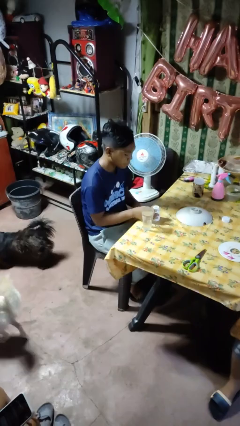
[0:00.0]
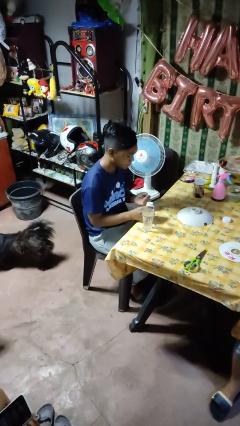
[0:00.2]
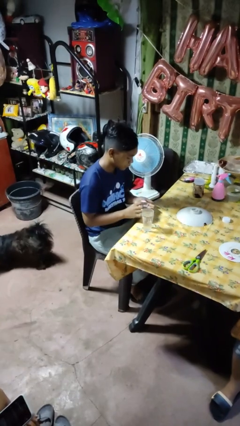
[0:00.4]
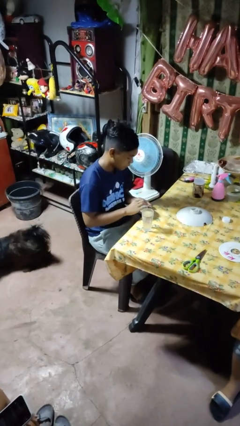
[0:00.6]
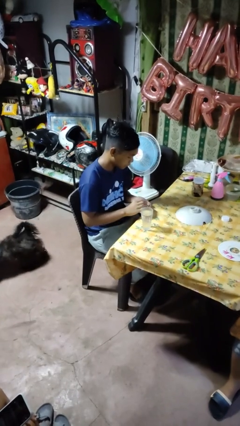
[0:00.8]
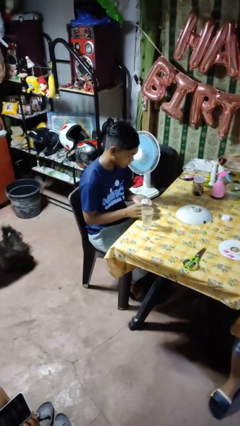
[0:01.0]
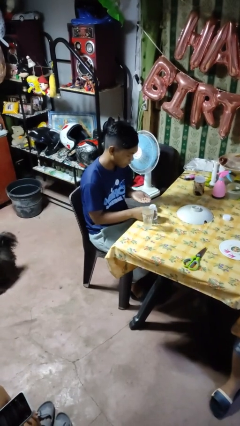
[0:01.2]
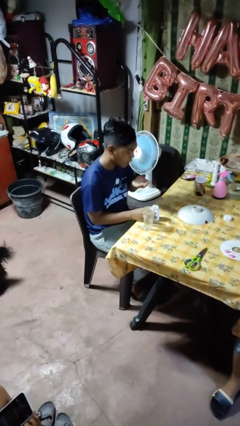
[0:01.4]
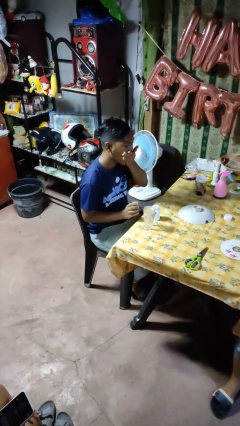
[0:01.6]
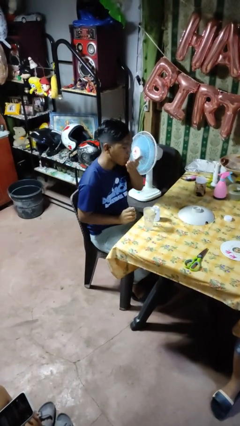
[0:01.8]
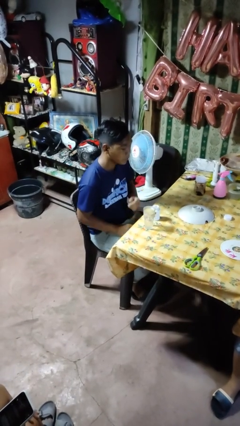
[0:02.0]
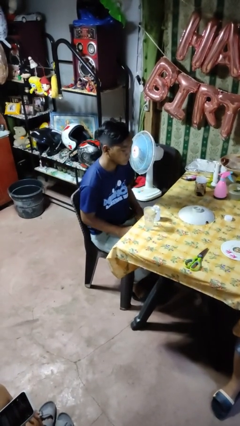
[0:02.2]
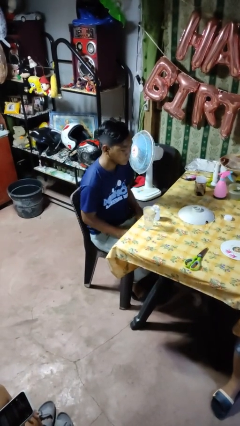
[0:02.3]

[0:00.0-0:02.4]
person takes medicine pills

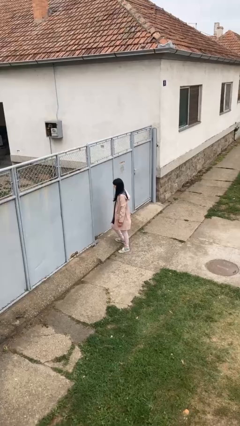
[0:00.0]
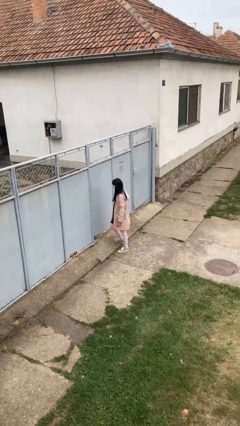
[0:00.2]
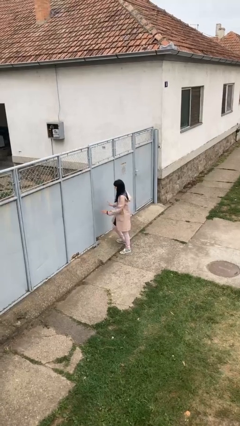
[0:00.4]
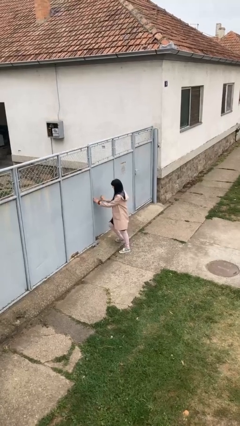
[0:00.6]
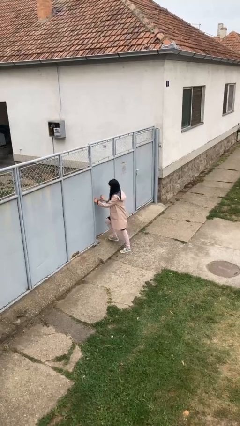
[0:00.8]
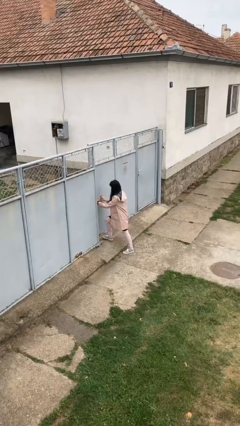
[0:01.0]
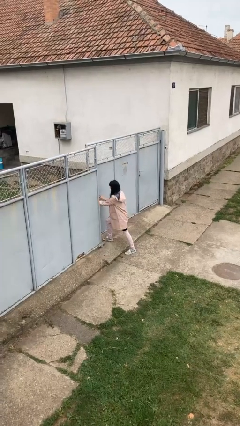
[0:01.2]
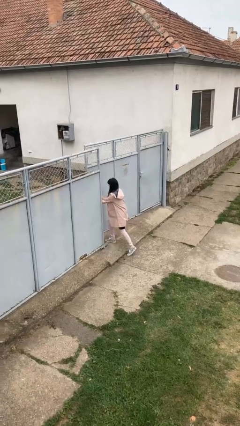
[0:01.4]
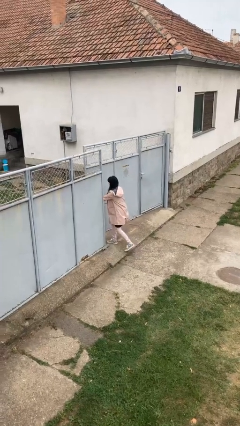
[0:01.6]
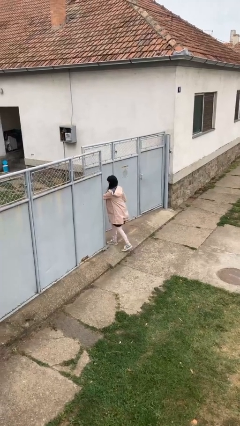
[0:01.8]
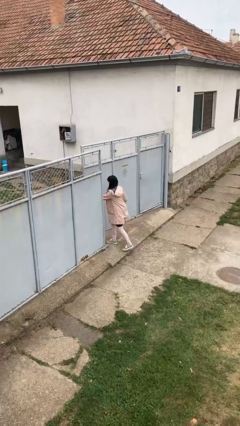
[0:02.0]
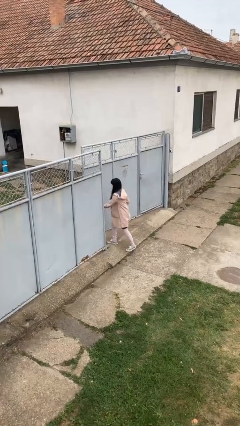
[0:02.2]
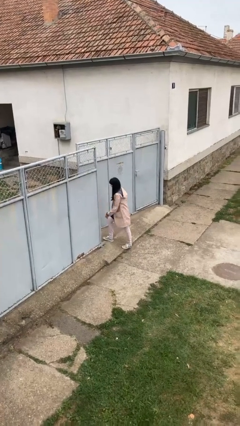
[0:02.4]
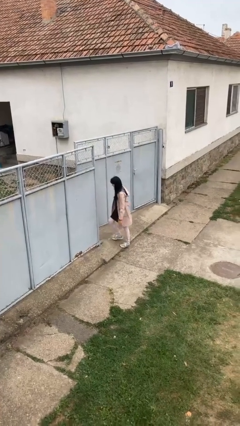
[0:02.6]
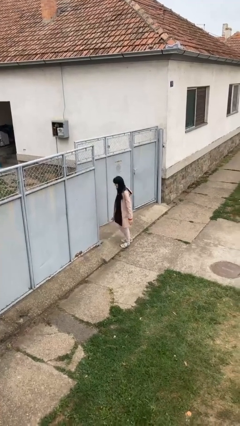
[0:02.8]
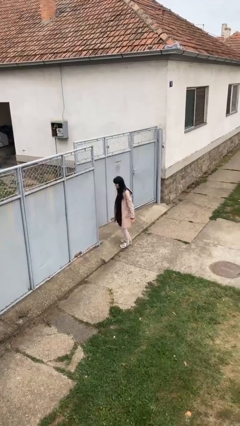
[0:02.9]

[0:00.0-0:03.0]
person opens gate

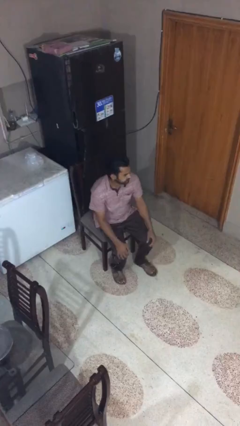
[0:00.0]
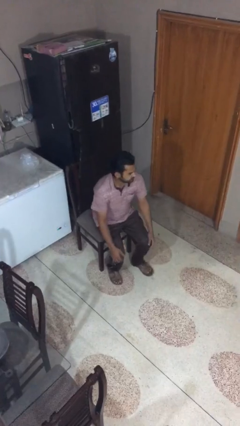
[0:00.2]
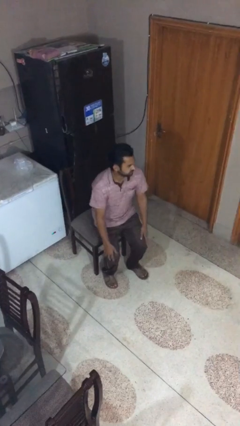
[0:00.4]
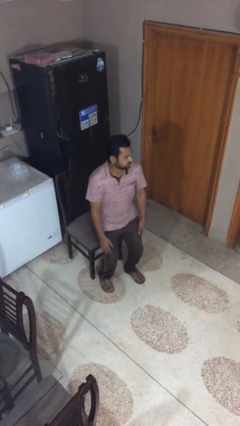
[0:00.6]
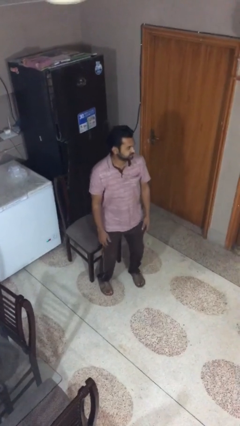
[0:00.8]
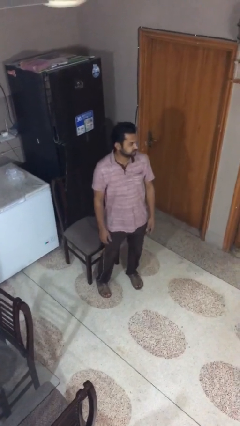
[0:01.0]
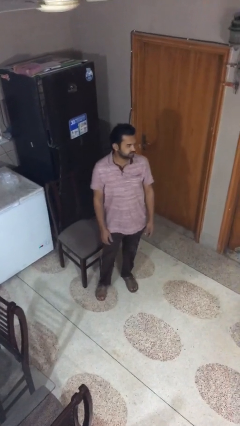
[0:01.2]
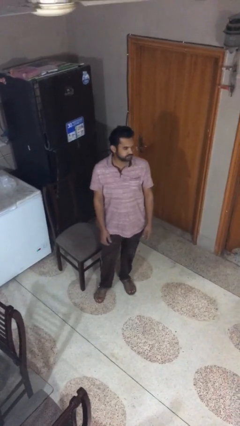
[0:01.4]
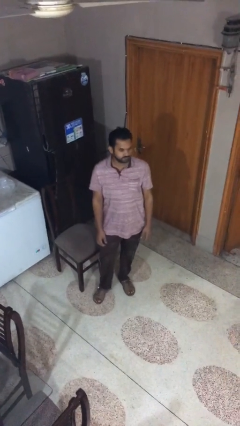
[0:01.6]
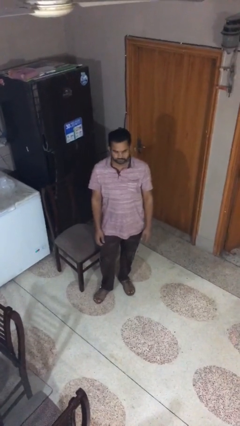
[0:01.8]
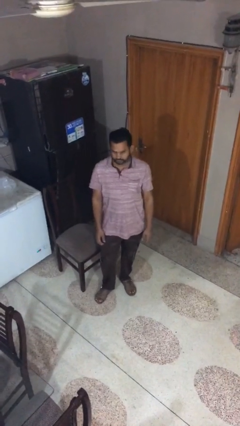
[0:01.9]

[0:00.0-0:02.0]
person stands up

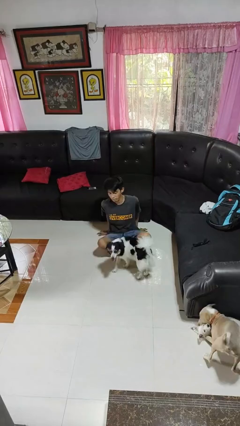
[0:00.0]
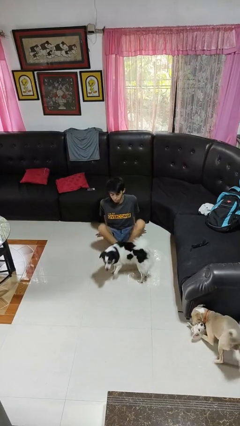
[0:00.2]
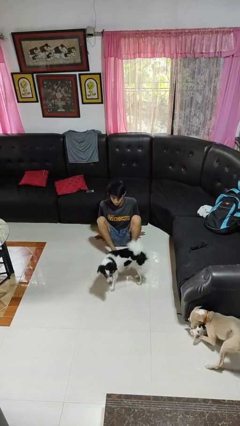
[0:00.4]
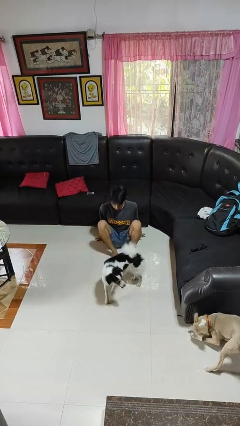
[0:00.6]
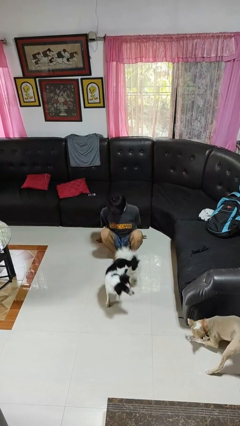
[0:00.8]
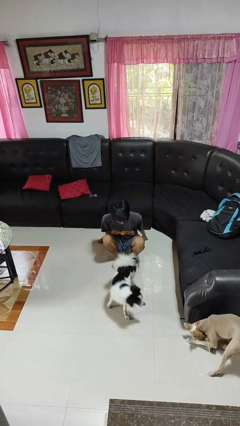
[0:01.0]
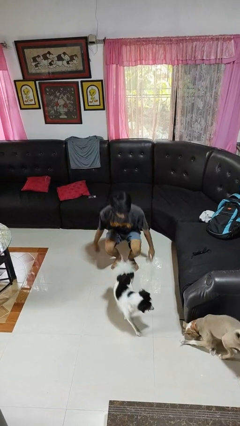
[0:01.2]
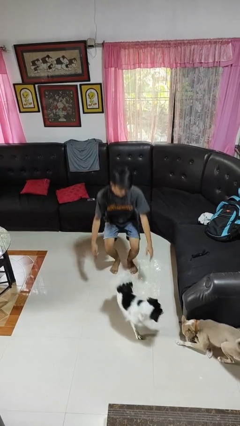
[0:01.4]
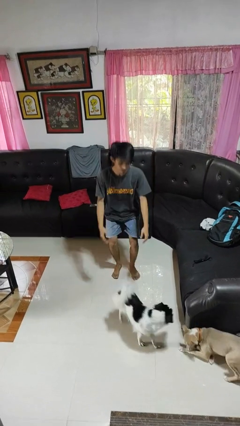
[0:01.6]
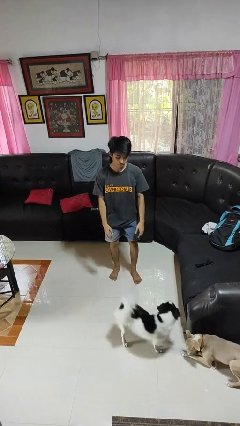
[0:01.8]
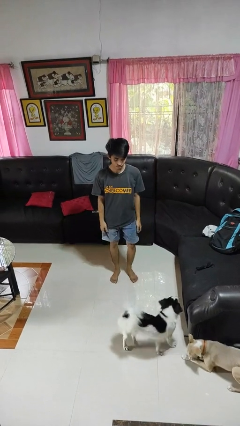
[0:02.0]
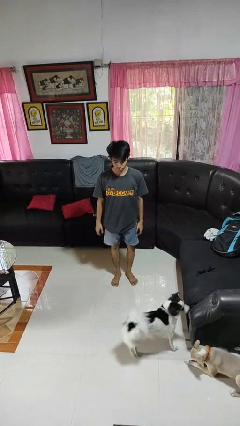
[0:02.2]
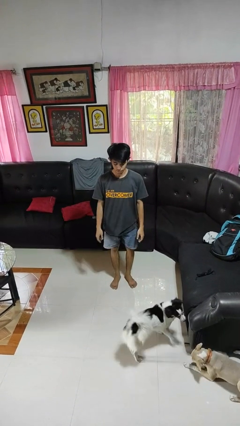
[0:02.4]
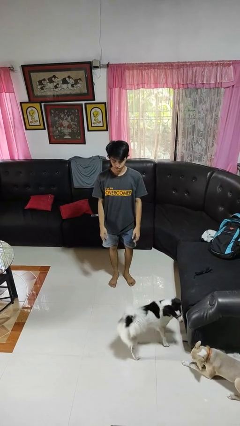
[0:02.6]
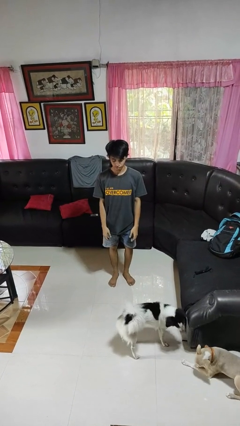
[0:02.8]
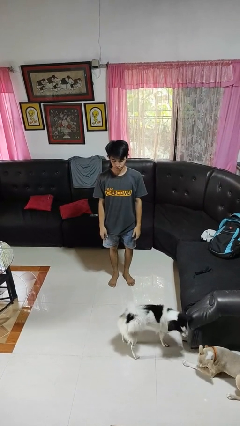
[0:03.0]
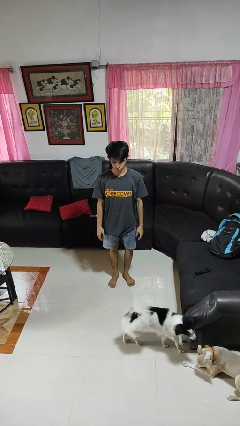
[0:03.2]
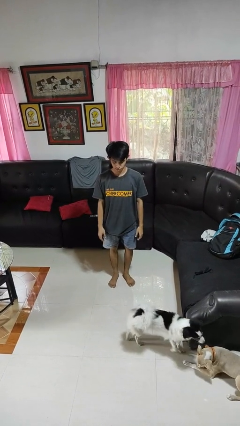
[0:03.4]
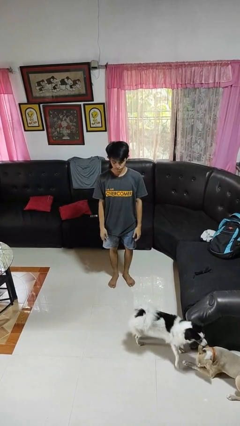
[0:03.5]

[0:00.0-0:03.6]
person stands up from floor

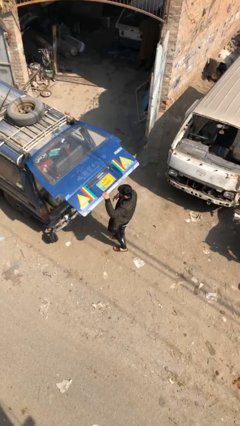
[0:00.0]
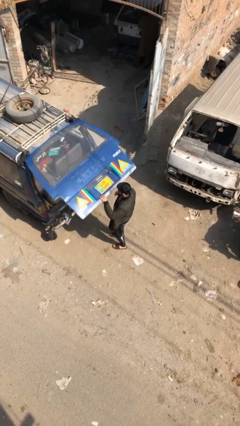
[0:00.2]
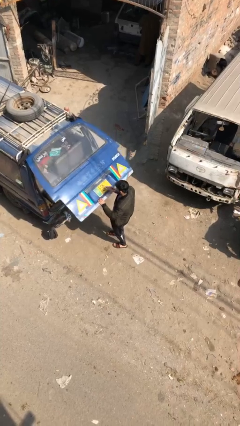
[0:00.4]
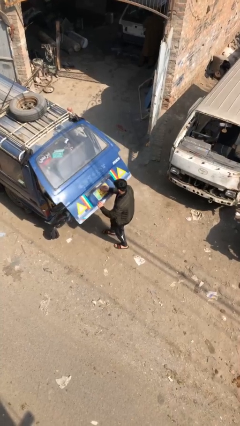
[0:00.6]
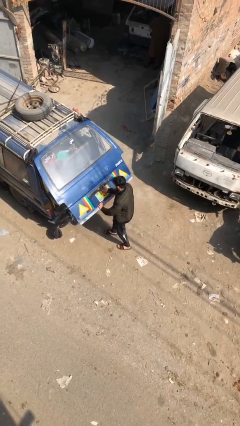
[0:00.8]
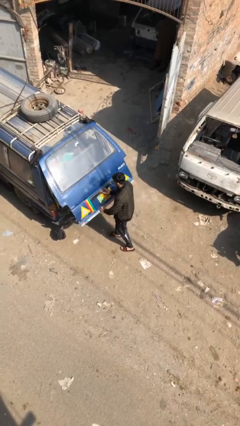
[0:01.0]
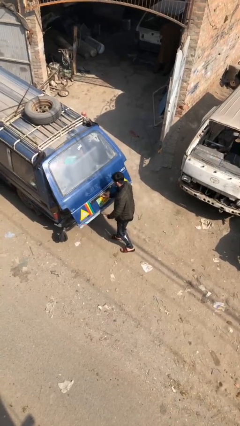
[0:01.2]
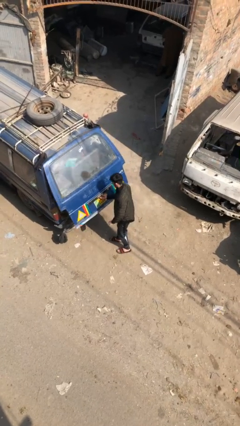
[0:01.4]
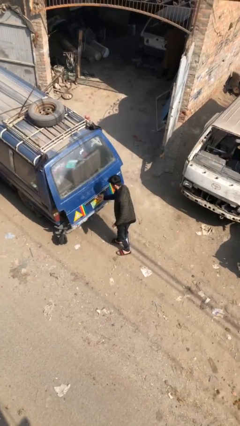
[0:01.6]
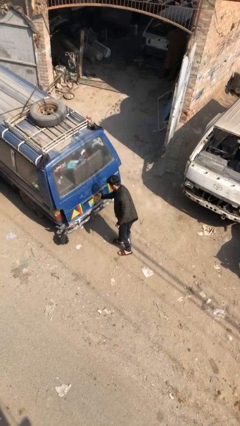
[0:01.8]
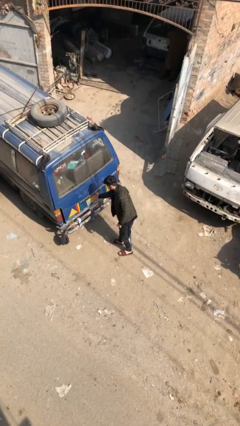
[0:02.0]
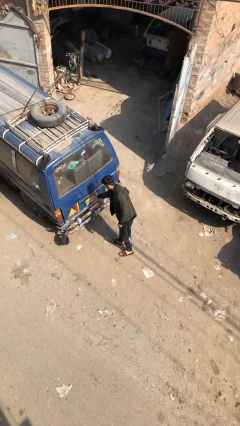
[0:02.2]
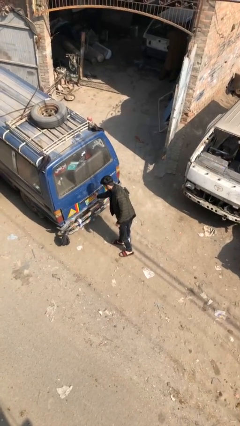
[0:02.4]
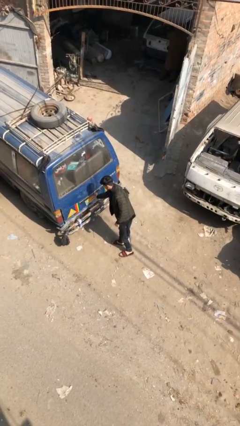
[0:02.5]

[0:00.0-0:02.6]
person closes car trunk

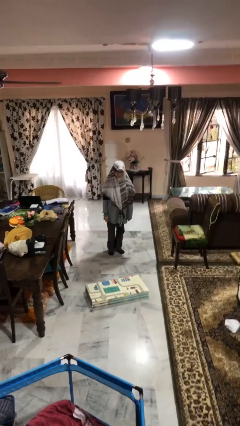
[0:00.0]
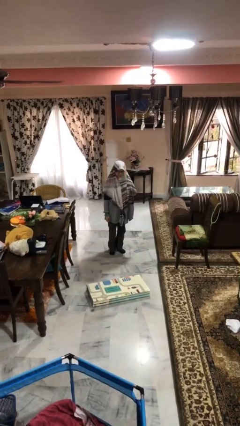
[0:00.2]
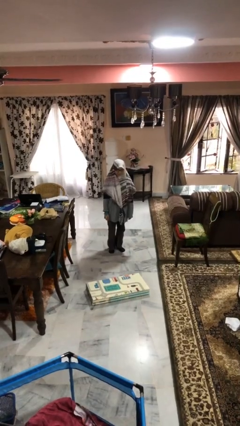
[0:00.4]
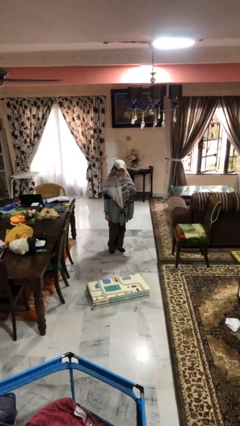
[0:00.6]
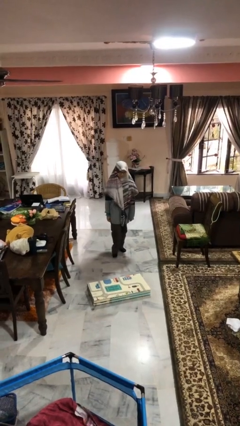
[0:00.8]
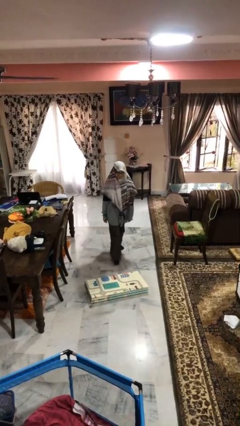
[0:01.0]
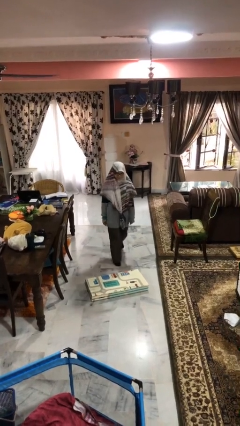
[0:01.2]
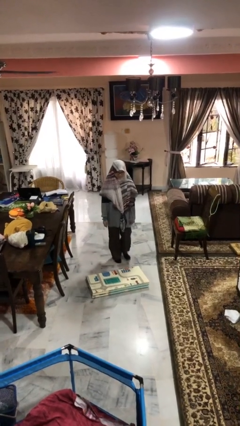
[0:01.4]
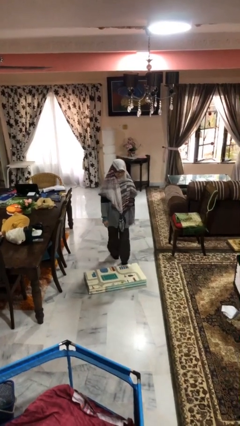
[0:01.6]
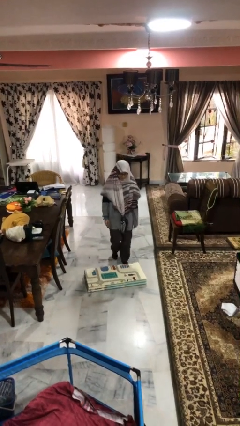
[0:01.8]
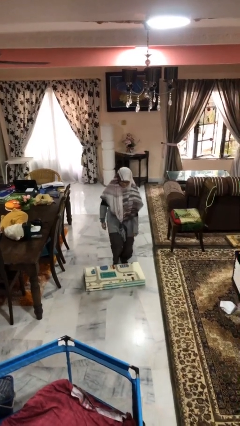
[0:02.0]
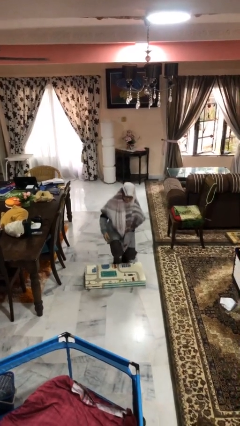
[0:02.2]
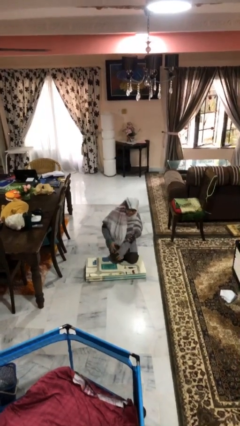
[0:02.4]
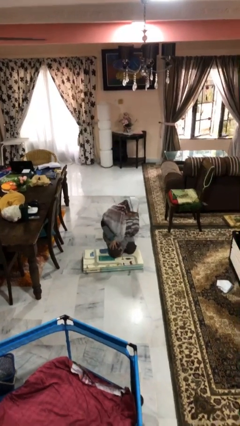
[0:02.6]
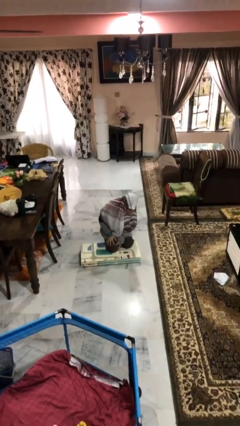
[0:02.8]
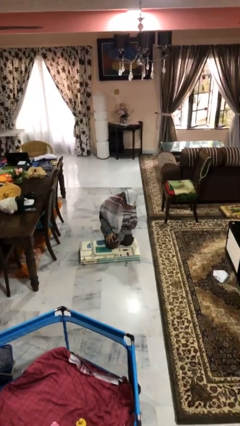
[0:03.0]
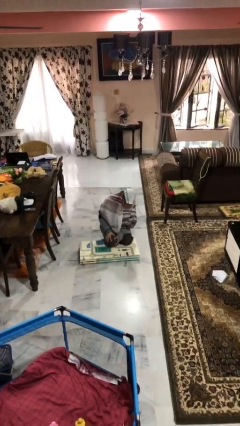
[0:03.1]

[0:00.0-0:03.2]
person trips on object on floor

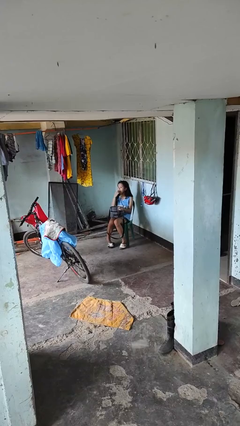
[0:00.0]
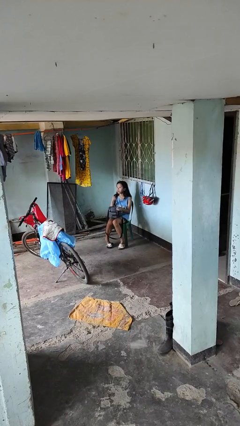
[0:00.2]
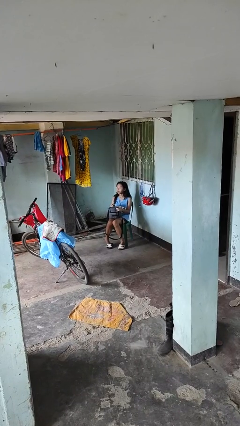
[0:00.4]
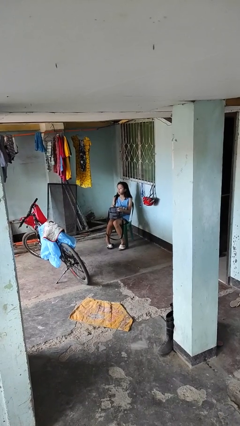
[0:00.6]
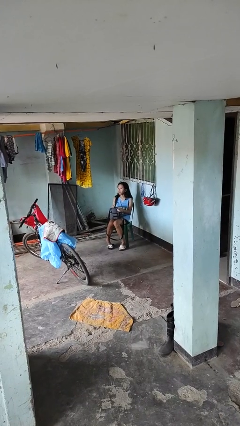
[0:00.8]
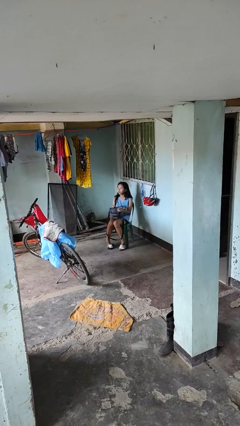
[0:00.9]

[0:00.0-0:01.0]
person eats snack from bag
